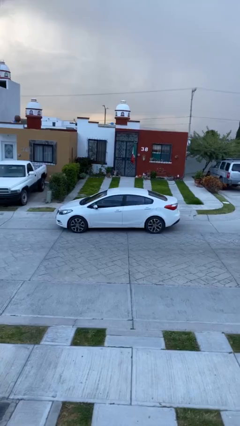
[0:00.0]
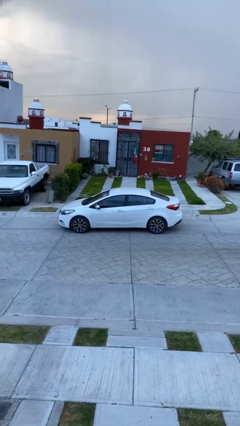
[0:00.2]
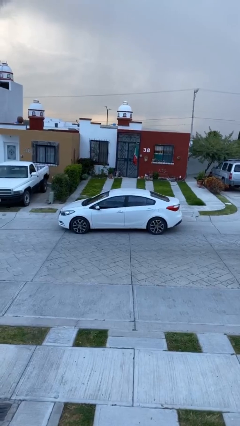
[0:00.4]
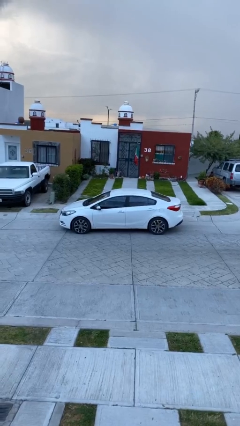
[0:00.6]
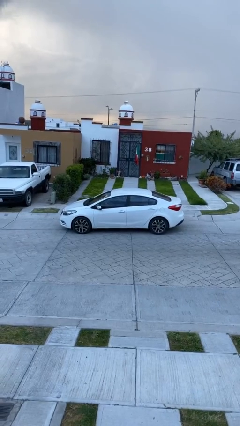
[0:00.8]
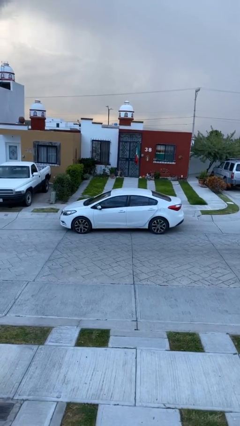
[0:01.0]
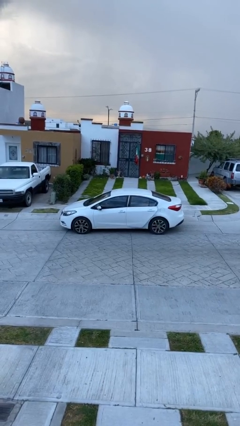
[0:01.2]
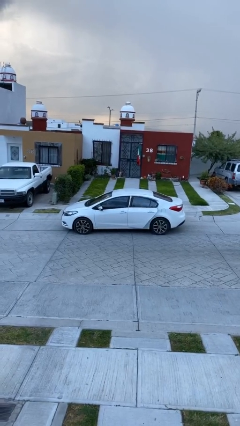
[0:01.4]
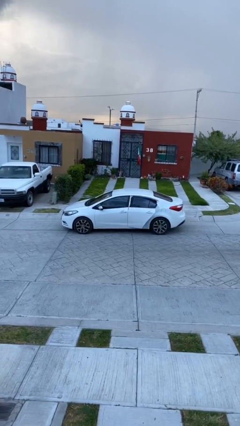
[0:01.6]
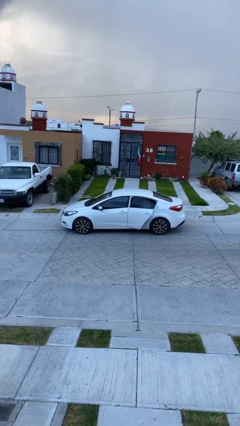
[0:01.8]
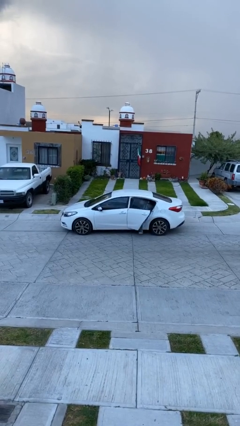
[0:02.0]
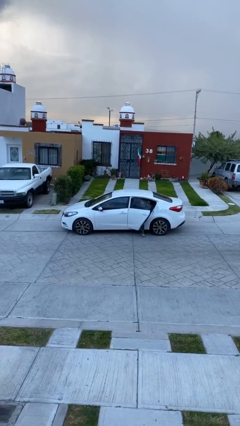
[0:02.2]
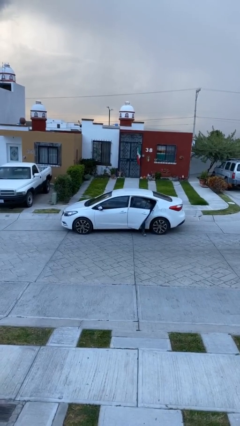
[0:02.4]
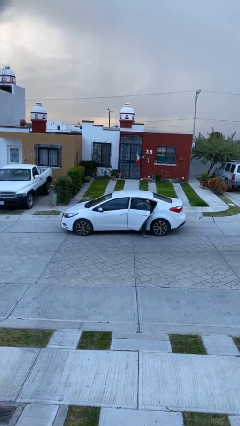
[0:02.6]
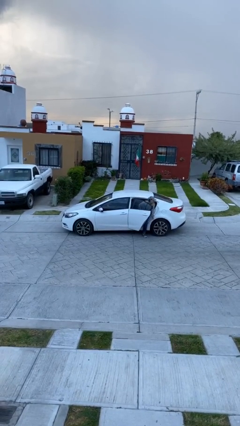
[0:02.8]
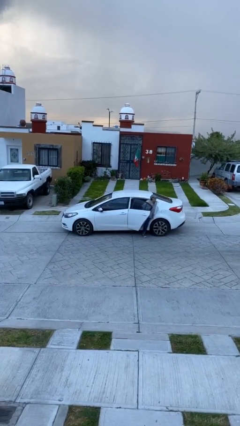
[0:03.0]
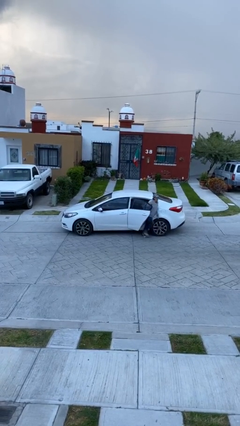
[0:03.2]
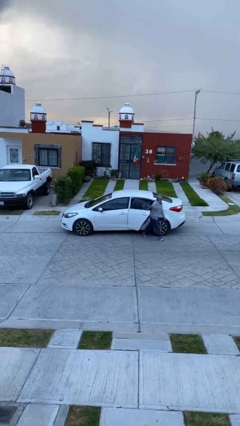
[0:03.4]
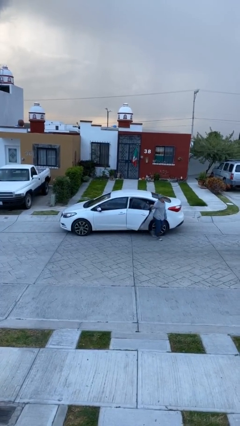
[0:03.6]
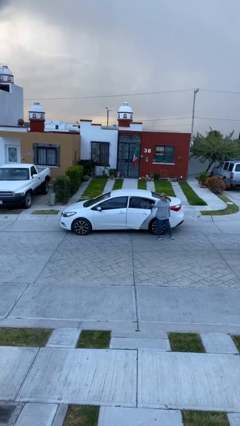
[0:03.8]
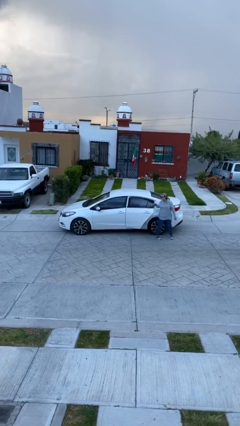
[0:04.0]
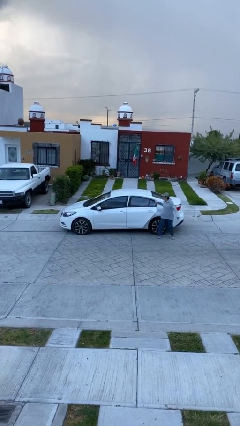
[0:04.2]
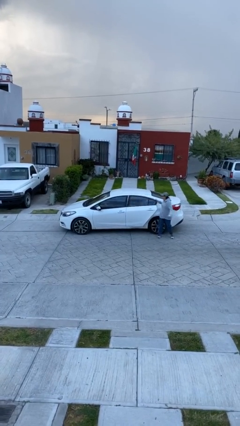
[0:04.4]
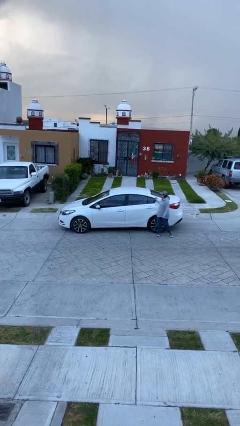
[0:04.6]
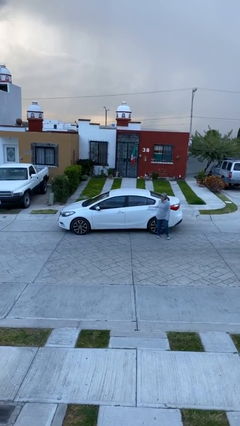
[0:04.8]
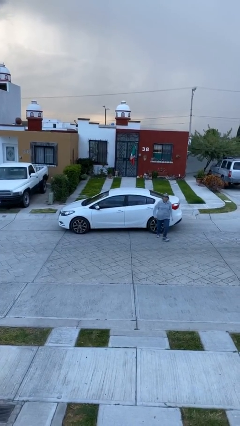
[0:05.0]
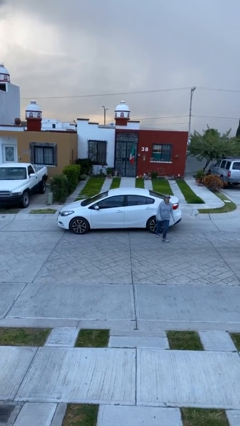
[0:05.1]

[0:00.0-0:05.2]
car drops off person

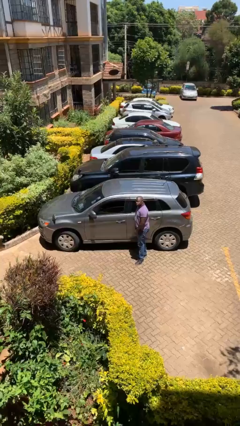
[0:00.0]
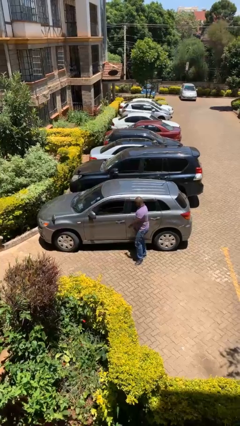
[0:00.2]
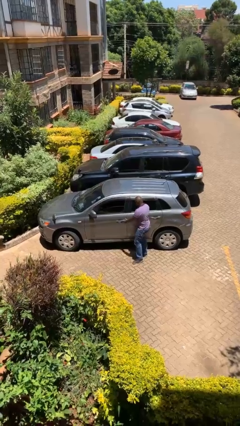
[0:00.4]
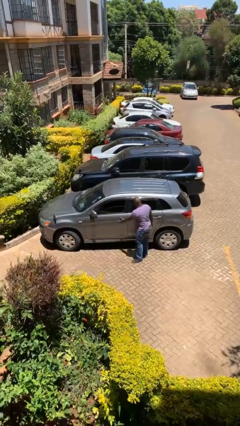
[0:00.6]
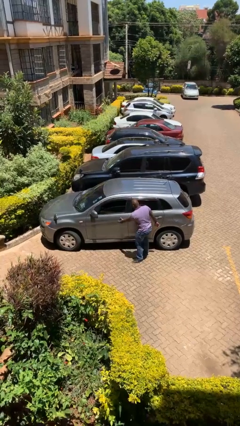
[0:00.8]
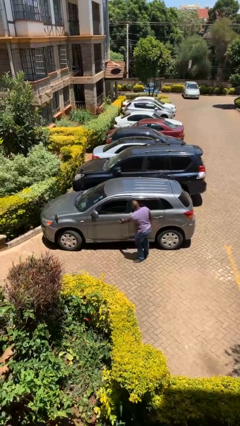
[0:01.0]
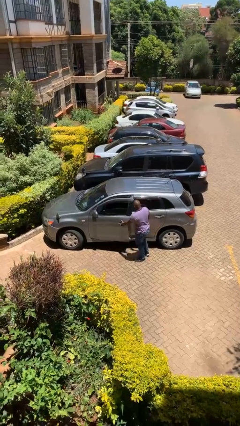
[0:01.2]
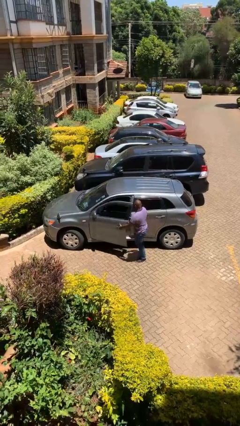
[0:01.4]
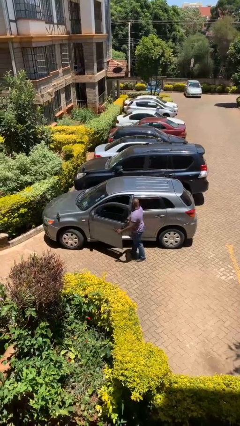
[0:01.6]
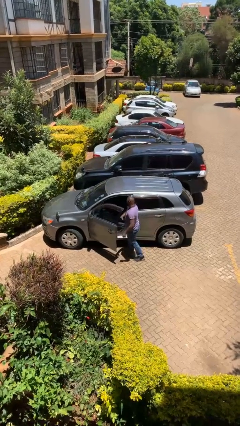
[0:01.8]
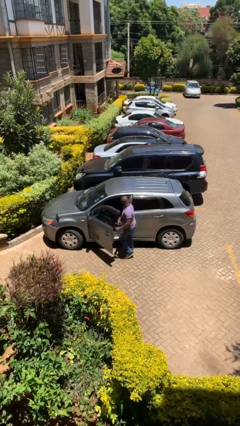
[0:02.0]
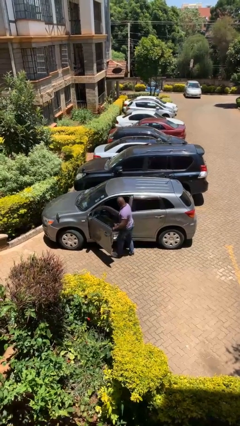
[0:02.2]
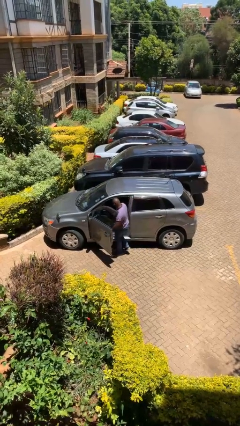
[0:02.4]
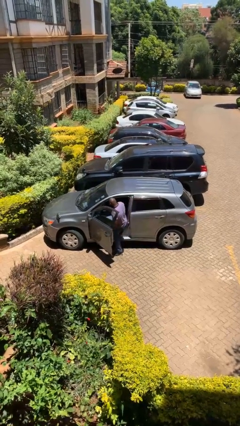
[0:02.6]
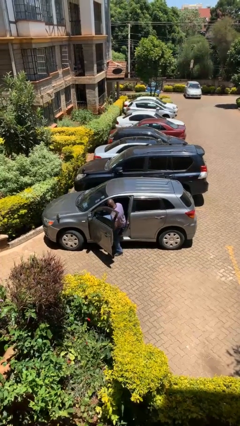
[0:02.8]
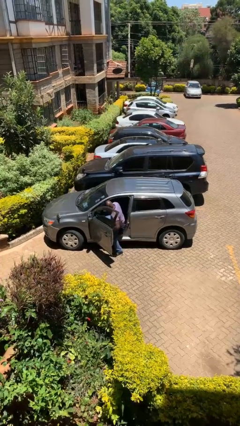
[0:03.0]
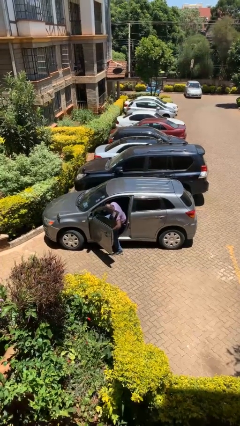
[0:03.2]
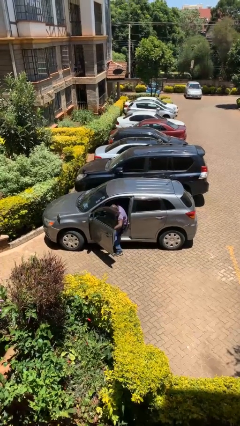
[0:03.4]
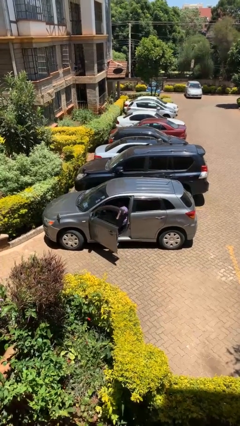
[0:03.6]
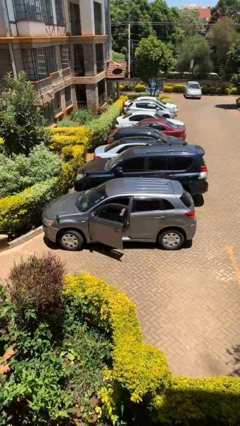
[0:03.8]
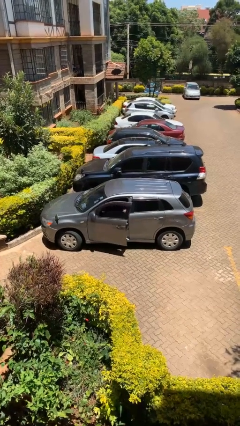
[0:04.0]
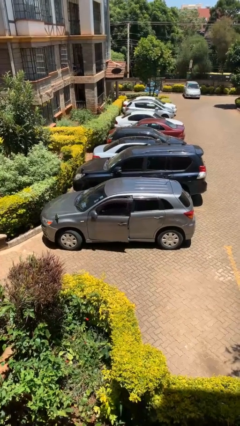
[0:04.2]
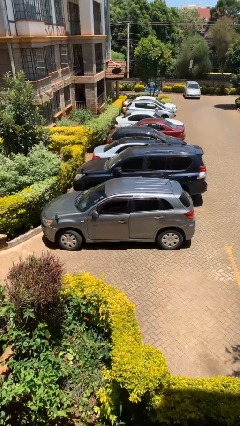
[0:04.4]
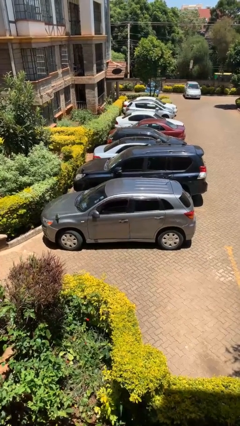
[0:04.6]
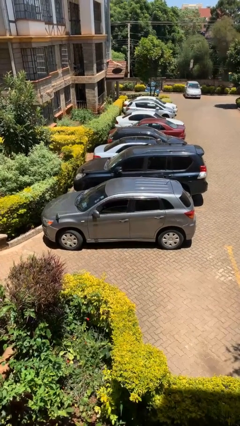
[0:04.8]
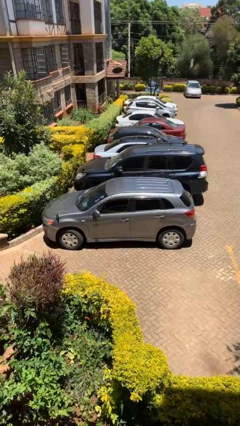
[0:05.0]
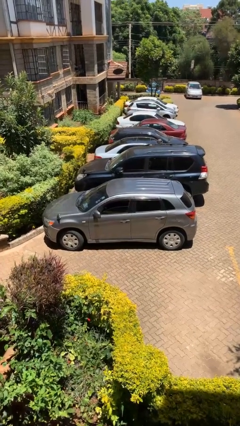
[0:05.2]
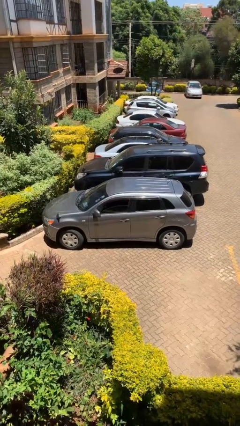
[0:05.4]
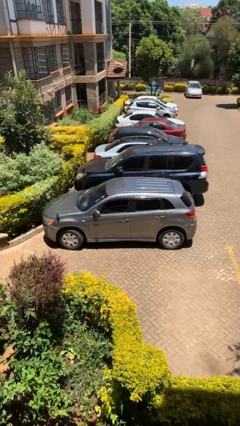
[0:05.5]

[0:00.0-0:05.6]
car picks up person

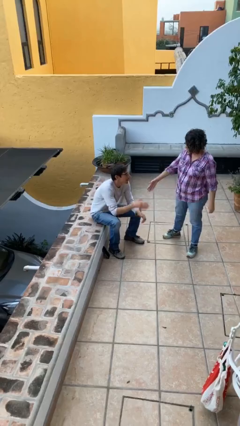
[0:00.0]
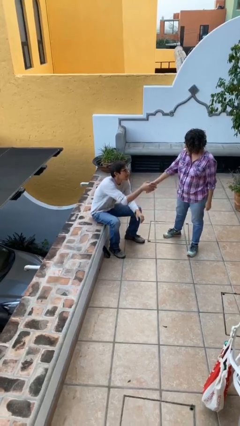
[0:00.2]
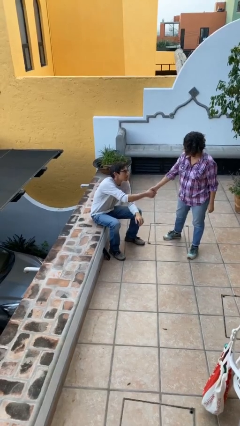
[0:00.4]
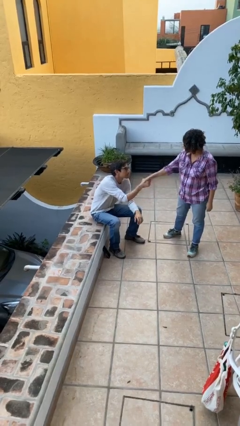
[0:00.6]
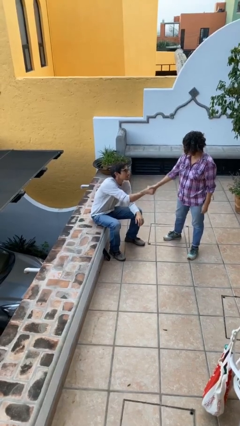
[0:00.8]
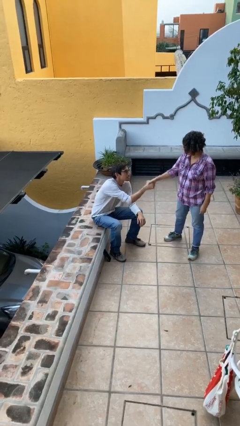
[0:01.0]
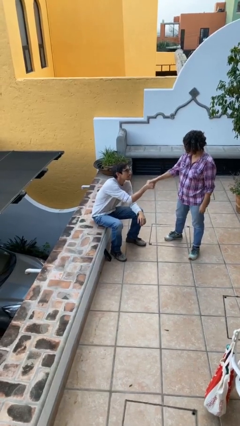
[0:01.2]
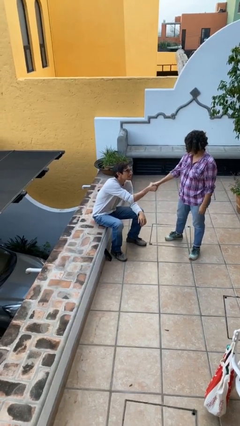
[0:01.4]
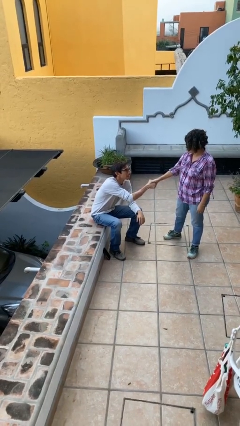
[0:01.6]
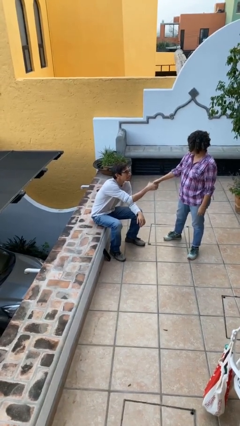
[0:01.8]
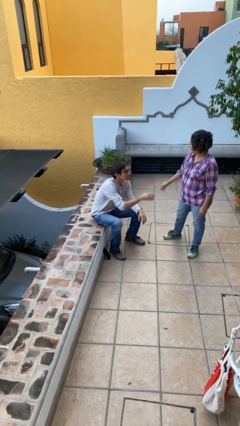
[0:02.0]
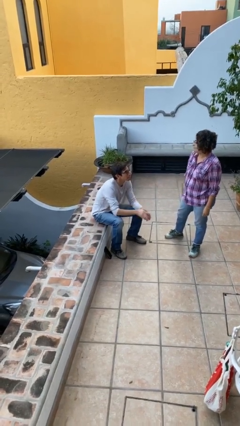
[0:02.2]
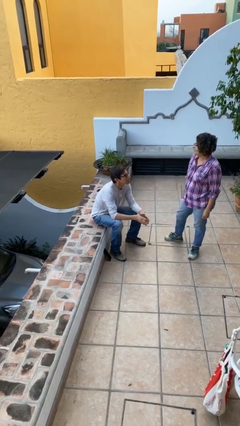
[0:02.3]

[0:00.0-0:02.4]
person shakes hand

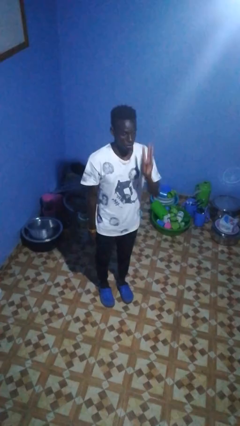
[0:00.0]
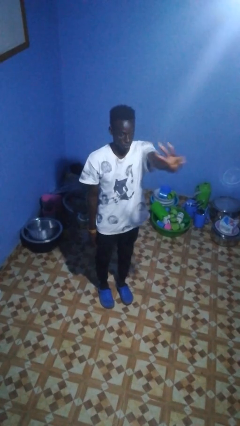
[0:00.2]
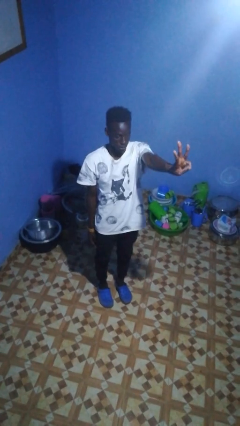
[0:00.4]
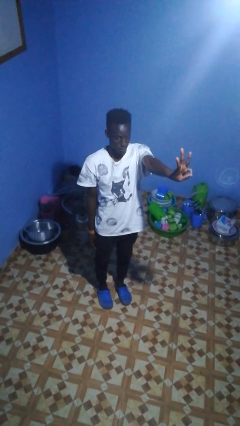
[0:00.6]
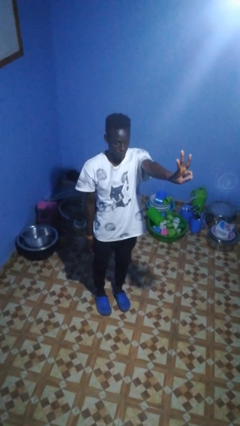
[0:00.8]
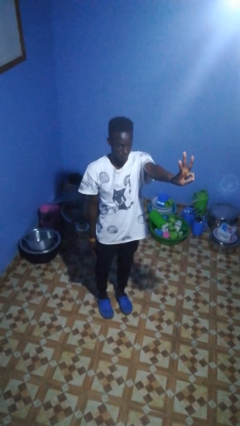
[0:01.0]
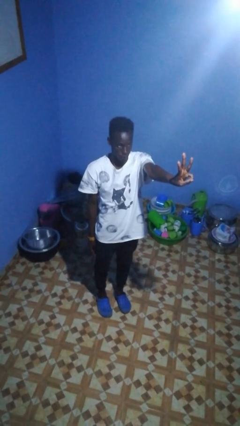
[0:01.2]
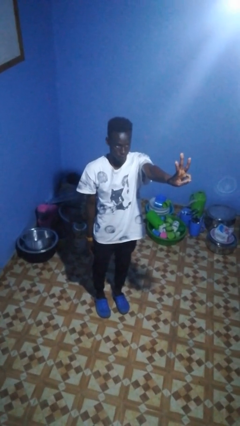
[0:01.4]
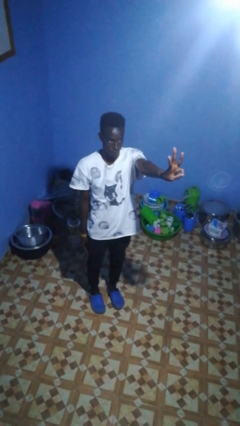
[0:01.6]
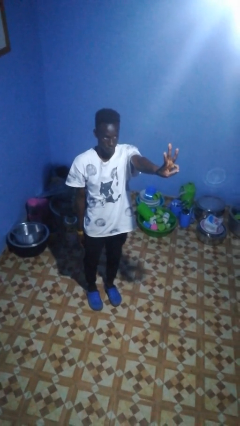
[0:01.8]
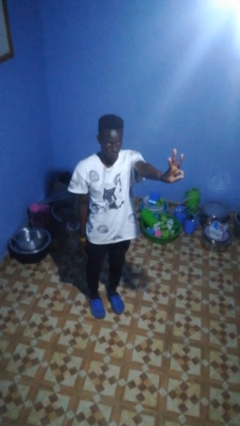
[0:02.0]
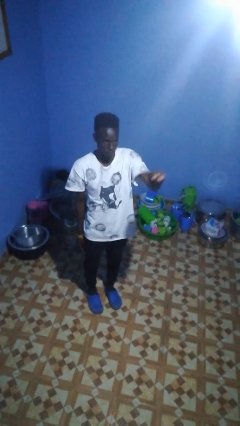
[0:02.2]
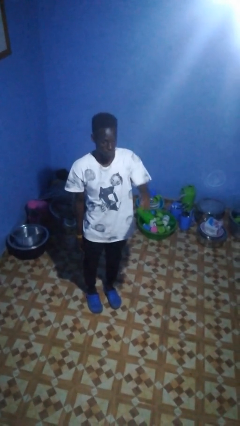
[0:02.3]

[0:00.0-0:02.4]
person gestures number three

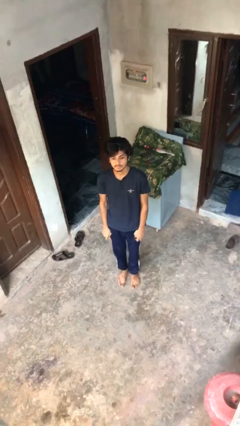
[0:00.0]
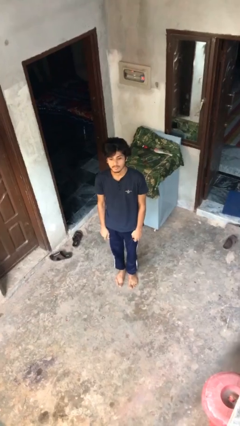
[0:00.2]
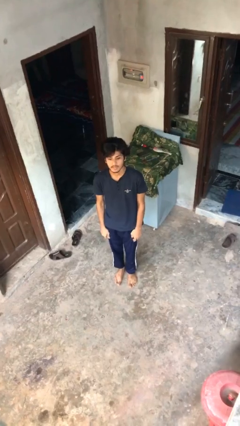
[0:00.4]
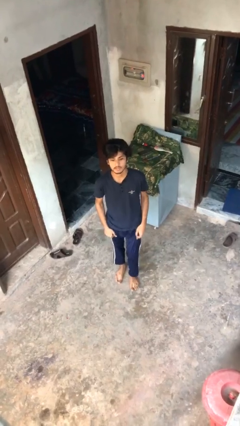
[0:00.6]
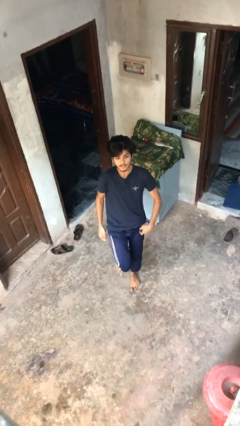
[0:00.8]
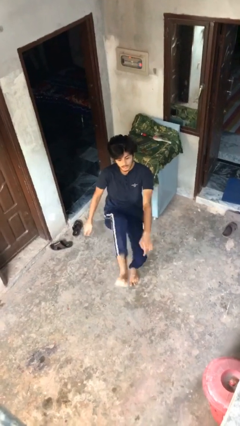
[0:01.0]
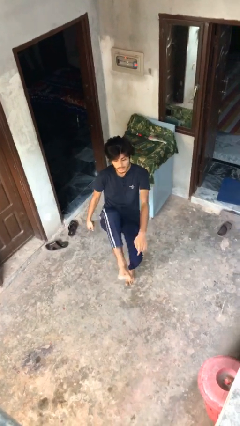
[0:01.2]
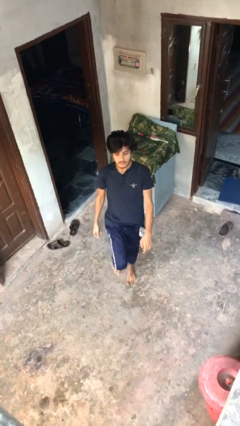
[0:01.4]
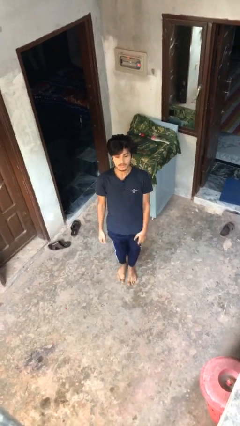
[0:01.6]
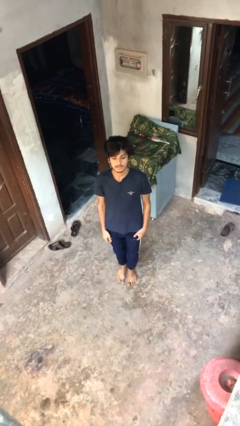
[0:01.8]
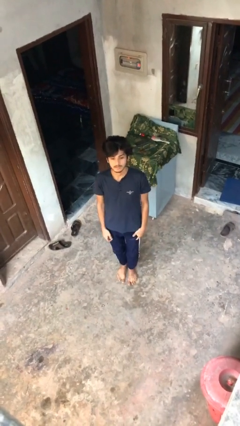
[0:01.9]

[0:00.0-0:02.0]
person karate kicks
